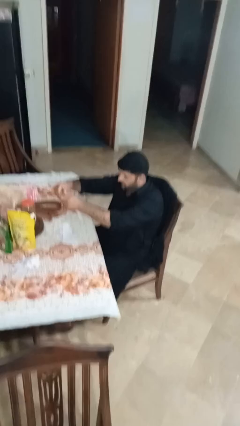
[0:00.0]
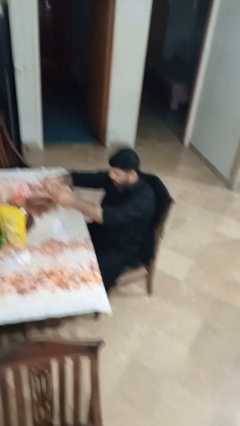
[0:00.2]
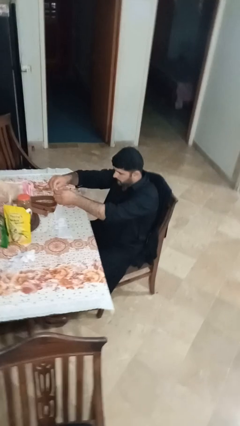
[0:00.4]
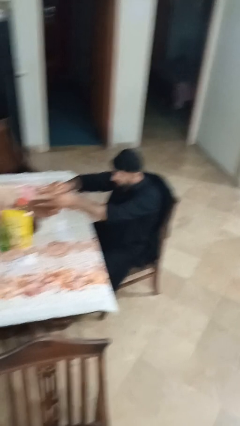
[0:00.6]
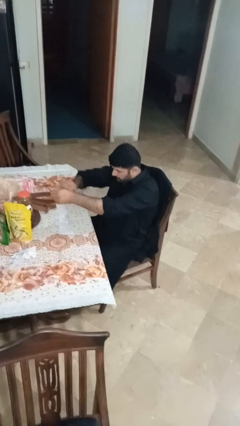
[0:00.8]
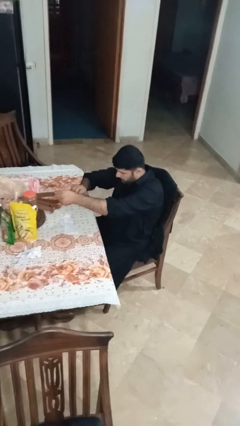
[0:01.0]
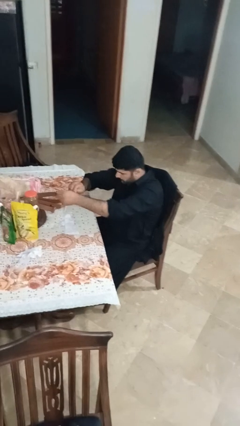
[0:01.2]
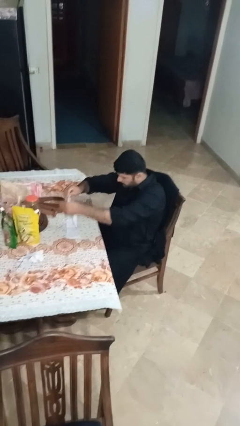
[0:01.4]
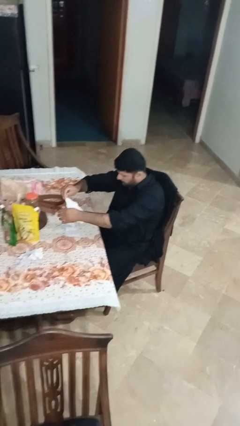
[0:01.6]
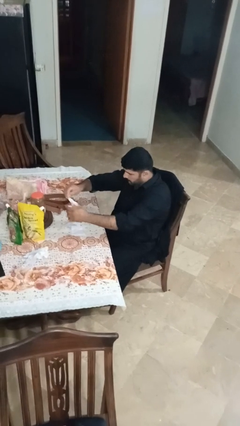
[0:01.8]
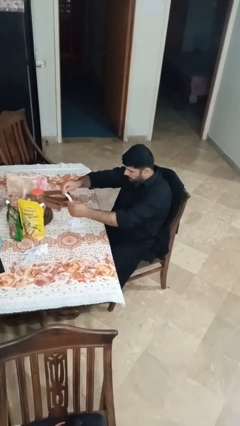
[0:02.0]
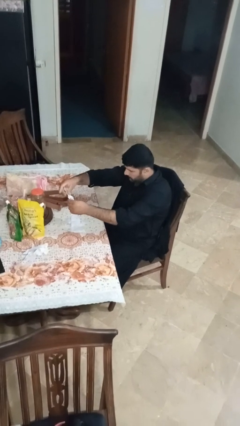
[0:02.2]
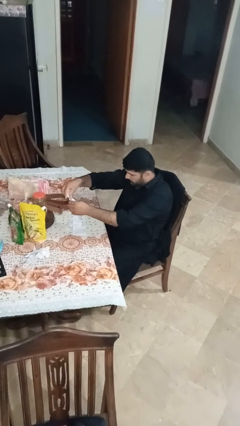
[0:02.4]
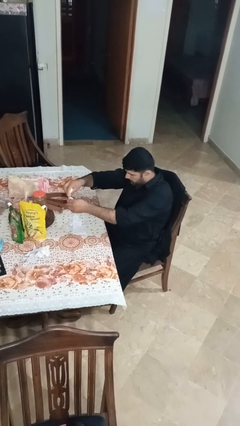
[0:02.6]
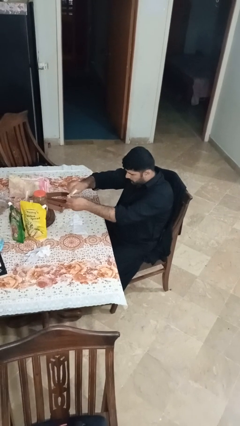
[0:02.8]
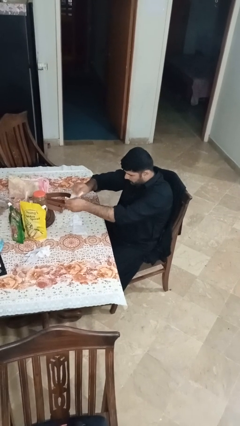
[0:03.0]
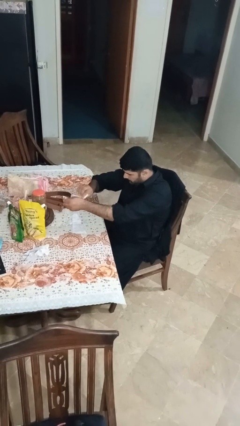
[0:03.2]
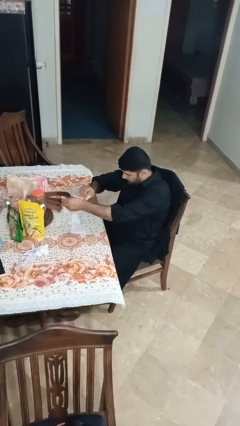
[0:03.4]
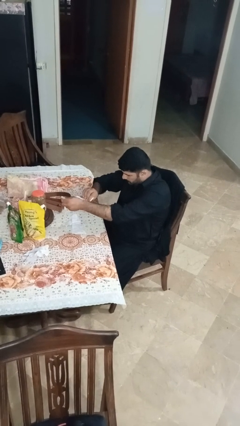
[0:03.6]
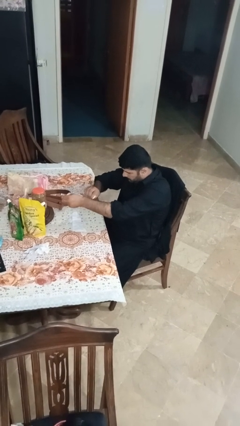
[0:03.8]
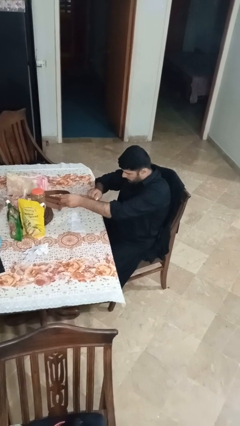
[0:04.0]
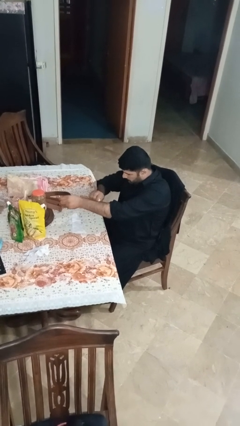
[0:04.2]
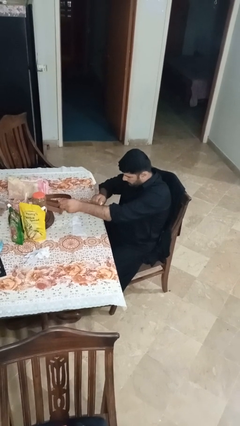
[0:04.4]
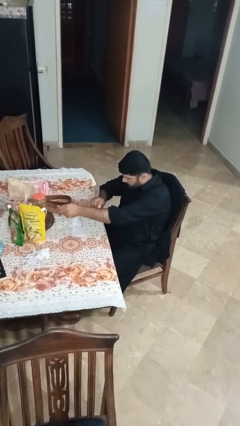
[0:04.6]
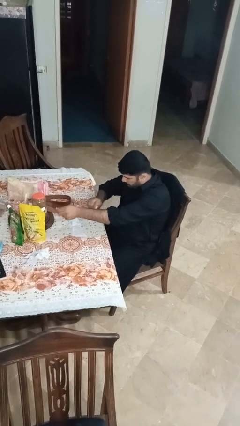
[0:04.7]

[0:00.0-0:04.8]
person tears paper

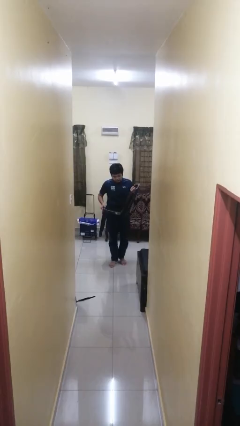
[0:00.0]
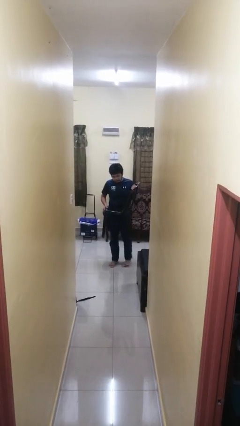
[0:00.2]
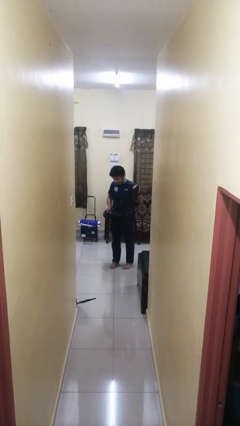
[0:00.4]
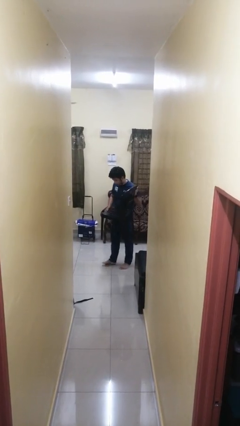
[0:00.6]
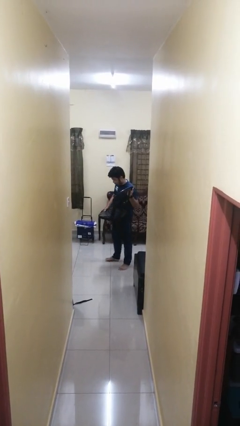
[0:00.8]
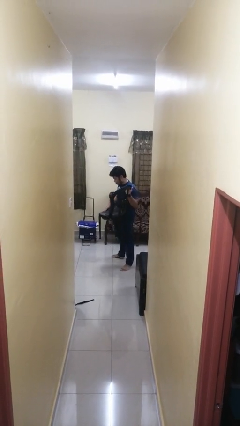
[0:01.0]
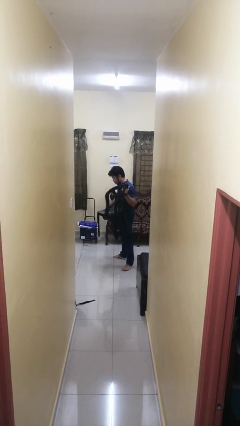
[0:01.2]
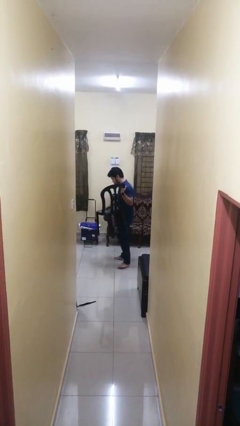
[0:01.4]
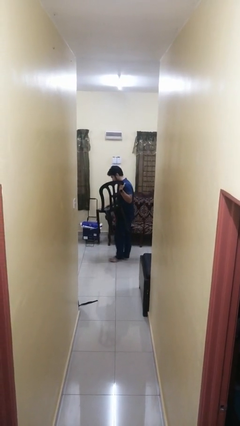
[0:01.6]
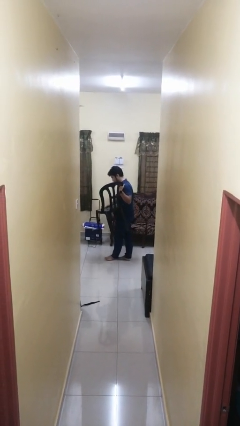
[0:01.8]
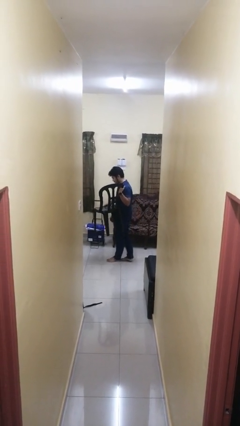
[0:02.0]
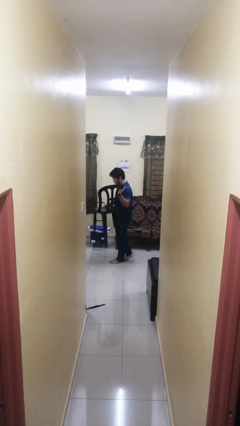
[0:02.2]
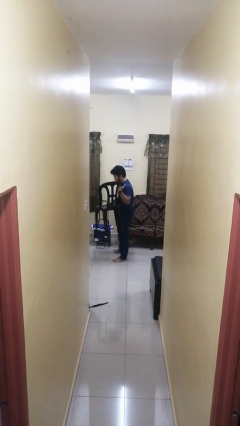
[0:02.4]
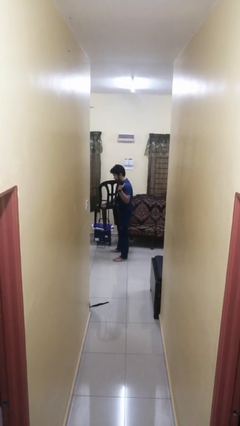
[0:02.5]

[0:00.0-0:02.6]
person carries furniture

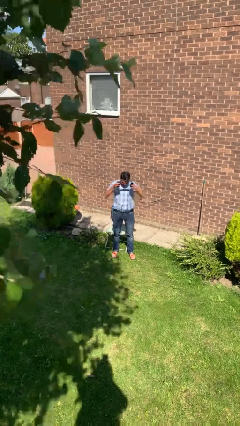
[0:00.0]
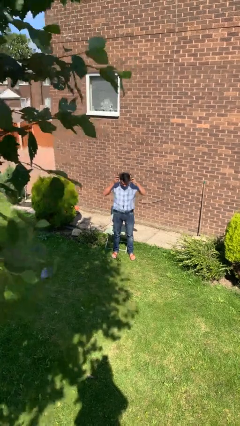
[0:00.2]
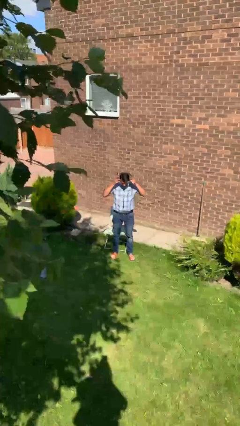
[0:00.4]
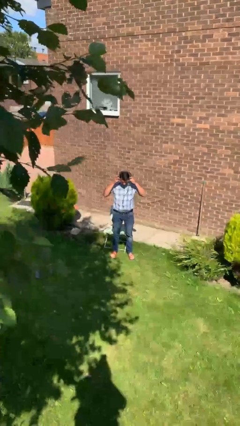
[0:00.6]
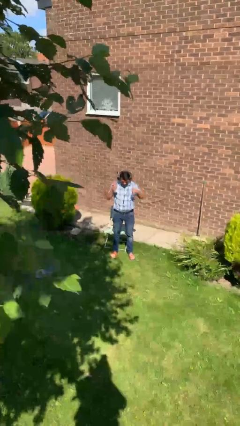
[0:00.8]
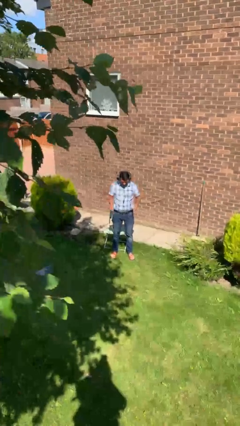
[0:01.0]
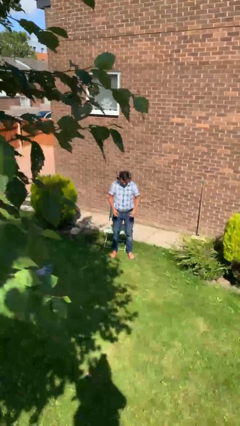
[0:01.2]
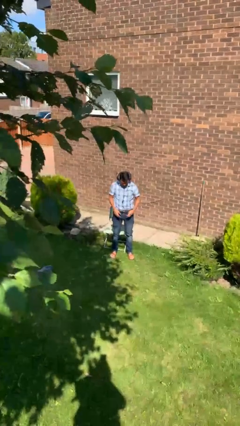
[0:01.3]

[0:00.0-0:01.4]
person puts on headphones

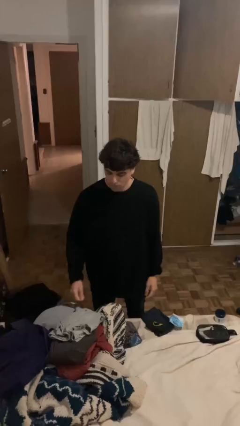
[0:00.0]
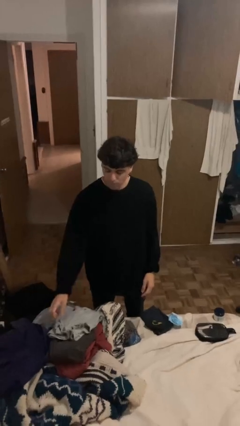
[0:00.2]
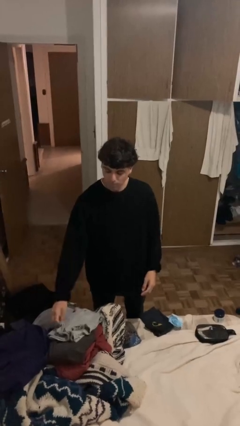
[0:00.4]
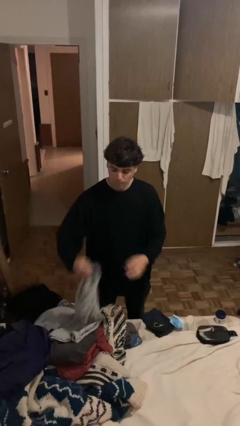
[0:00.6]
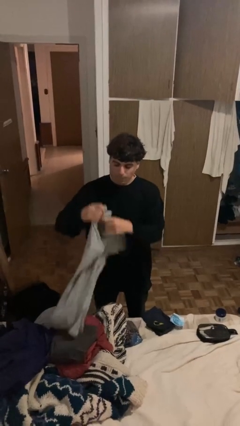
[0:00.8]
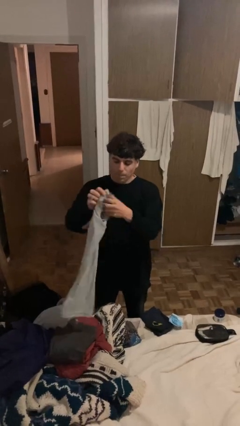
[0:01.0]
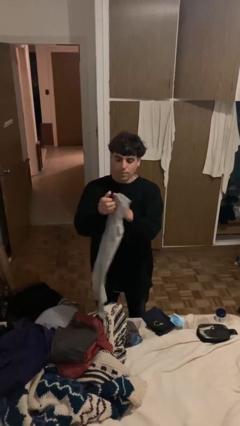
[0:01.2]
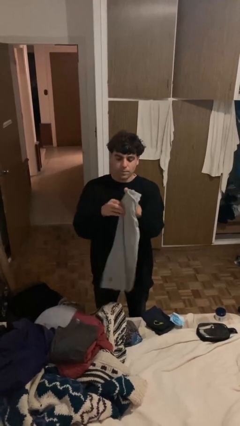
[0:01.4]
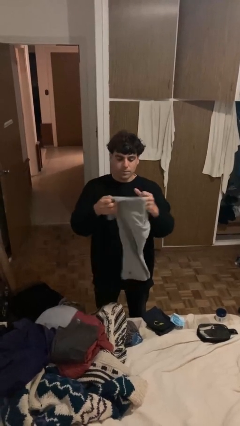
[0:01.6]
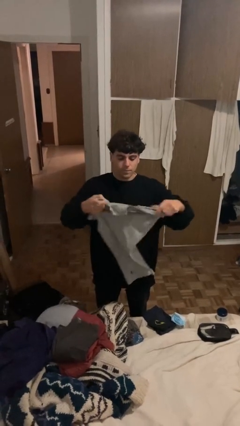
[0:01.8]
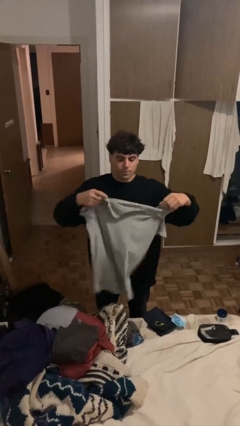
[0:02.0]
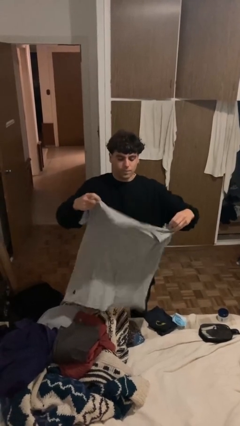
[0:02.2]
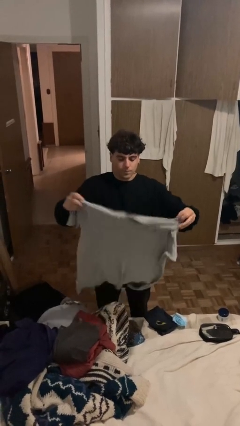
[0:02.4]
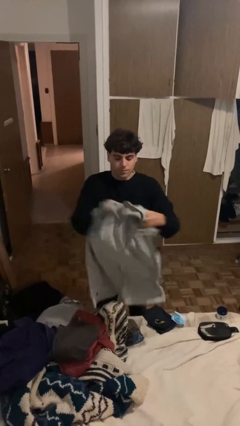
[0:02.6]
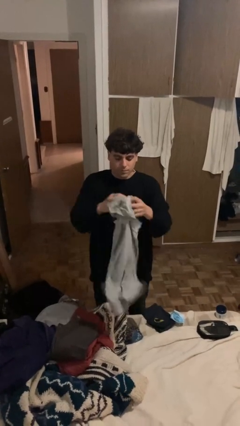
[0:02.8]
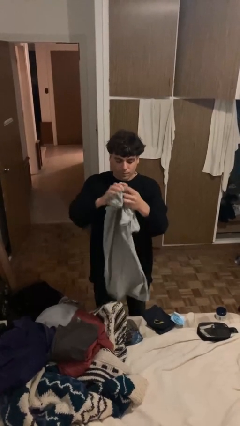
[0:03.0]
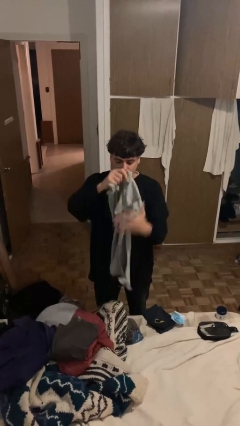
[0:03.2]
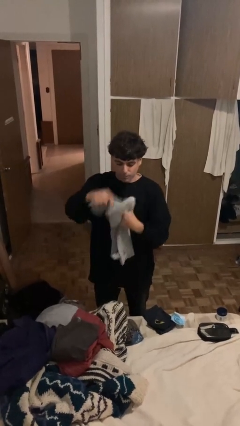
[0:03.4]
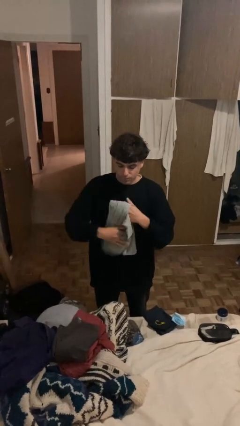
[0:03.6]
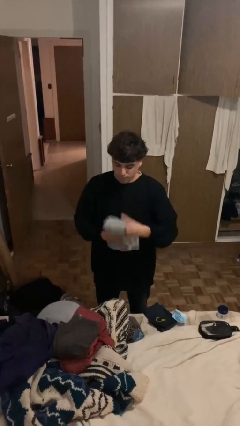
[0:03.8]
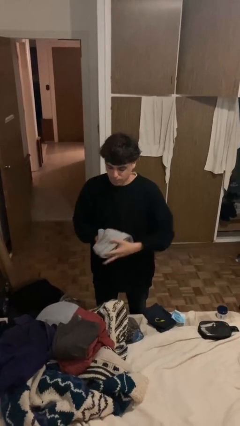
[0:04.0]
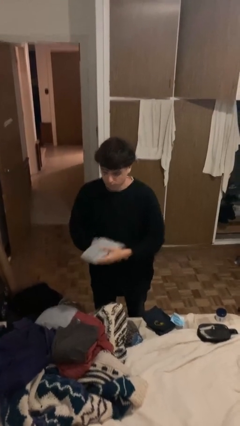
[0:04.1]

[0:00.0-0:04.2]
person folds shirt

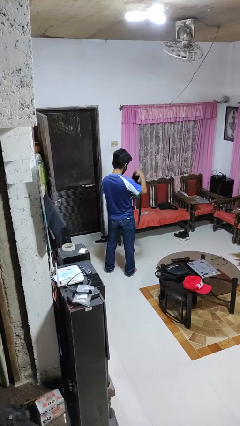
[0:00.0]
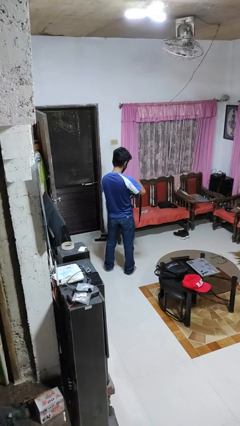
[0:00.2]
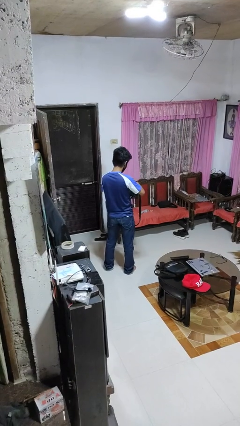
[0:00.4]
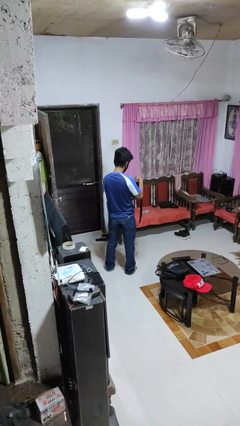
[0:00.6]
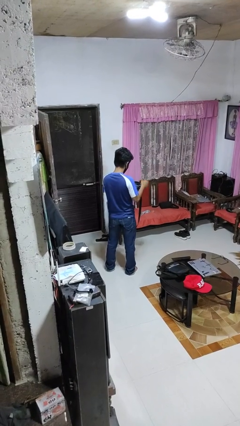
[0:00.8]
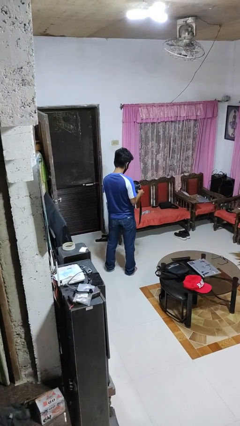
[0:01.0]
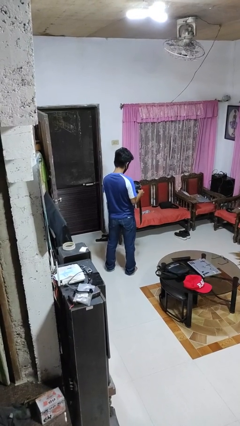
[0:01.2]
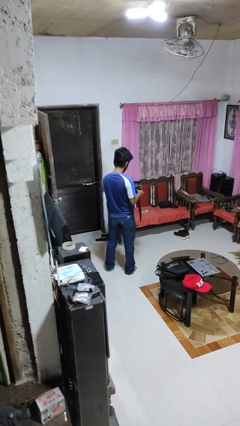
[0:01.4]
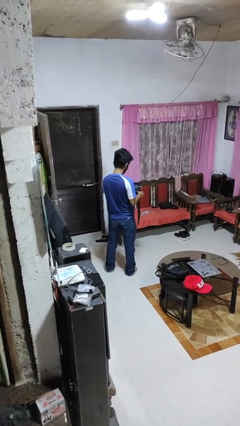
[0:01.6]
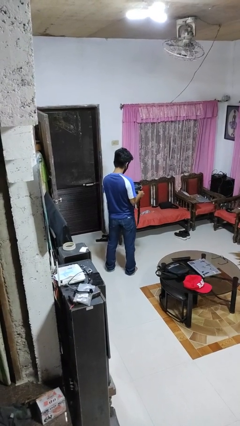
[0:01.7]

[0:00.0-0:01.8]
person puts object into purse

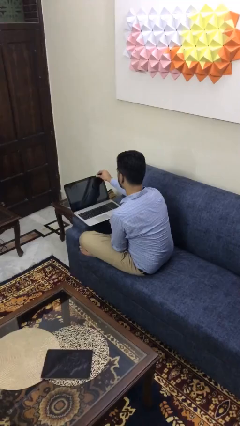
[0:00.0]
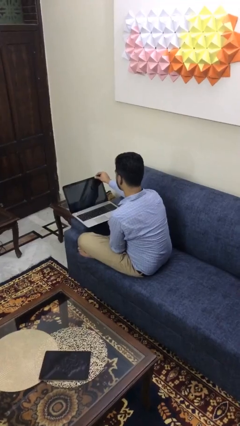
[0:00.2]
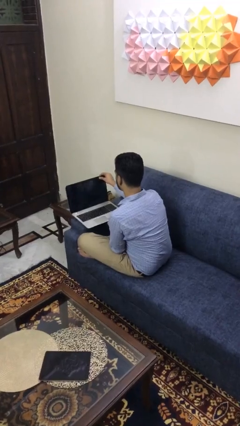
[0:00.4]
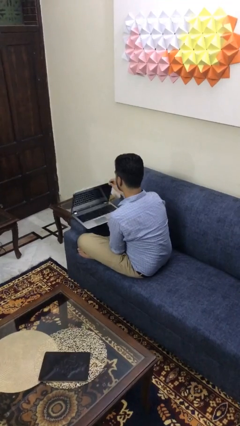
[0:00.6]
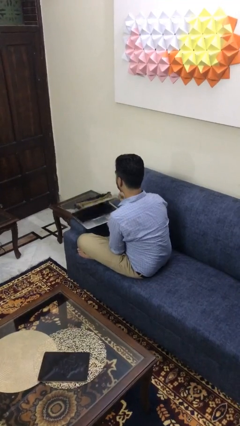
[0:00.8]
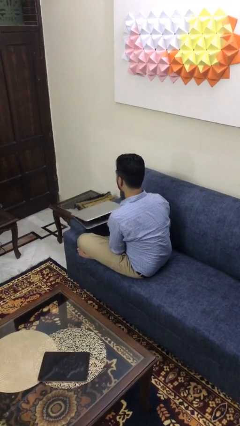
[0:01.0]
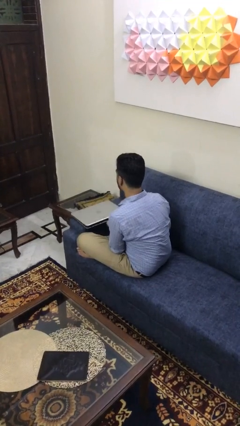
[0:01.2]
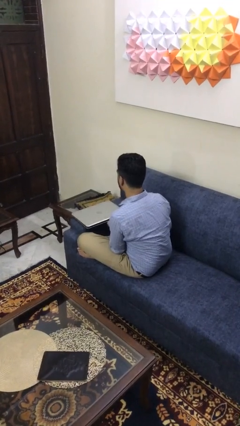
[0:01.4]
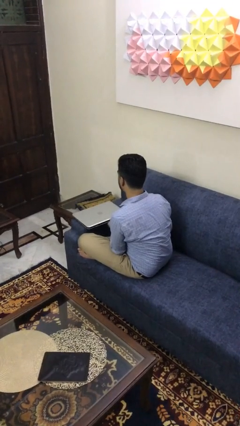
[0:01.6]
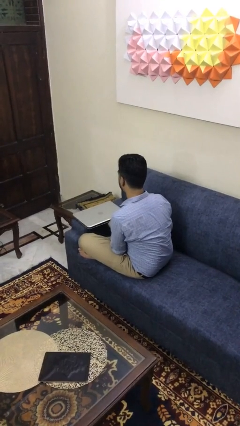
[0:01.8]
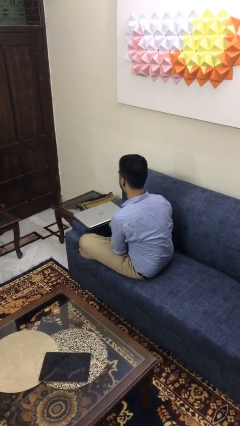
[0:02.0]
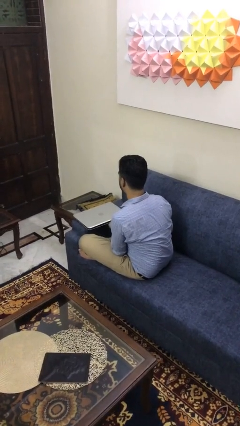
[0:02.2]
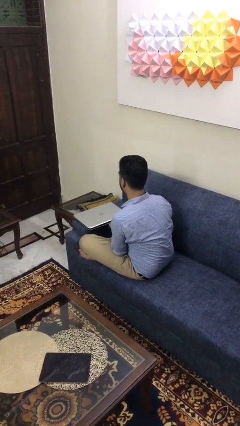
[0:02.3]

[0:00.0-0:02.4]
person closes laptop
